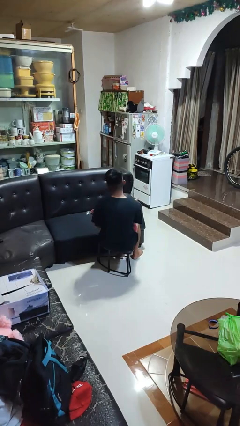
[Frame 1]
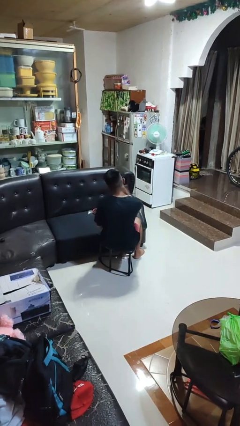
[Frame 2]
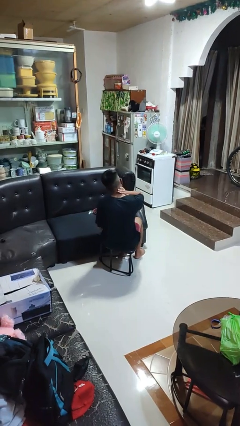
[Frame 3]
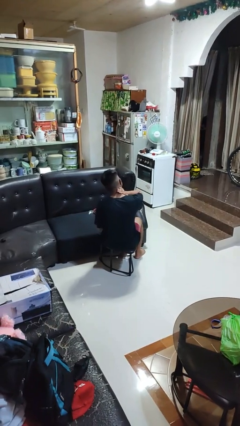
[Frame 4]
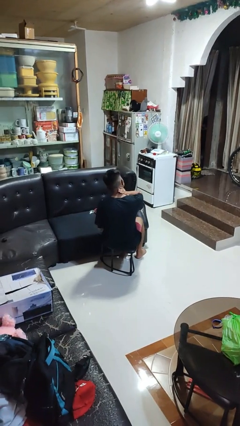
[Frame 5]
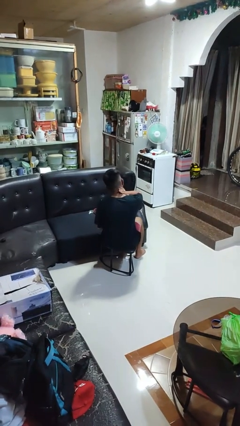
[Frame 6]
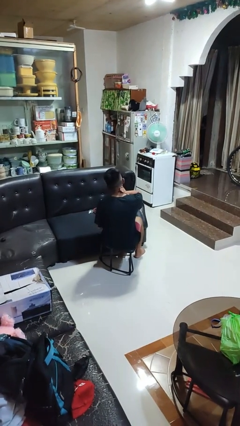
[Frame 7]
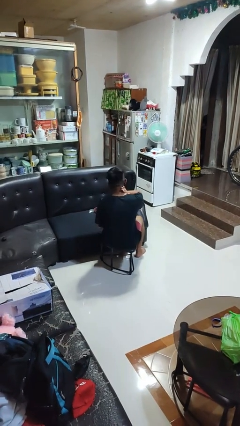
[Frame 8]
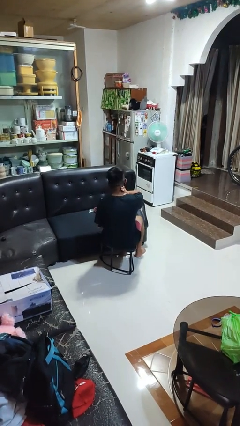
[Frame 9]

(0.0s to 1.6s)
person swats bug

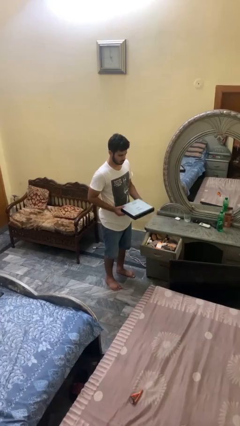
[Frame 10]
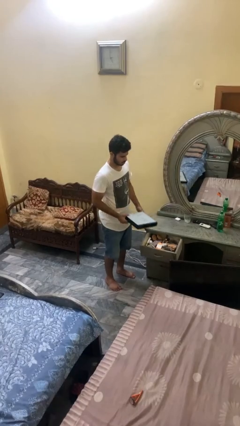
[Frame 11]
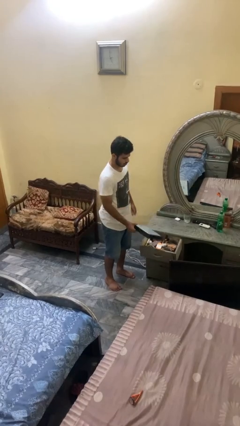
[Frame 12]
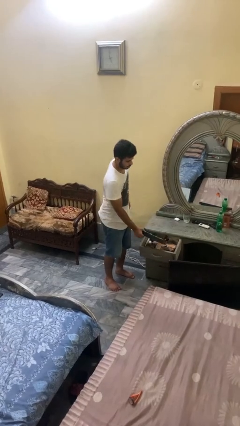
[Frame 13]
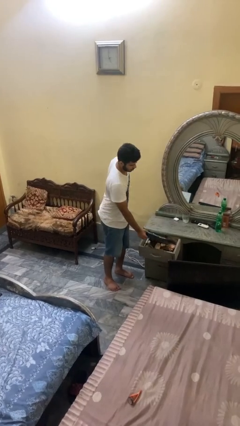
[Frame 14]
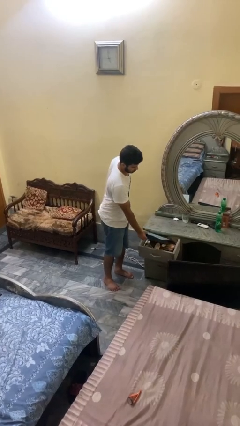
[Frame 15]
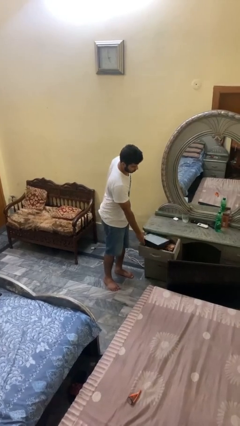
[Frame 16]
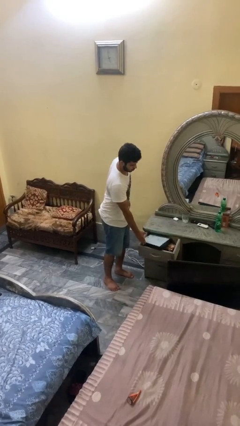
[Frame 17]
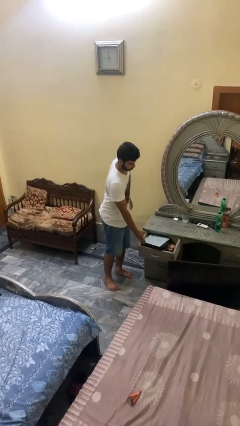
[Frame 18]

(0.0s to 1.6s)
person puts down object into cabinet

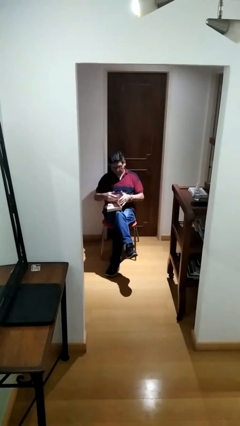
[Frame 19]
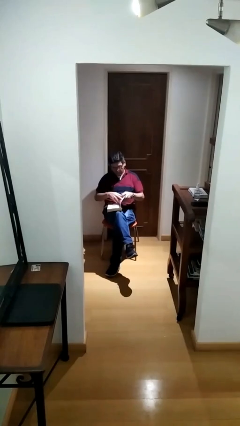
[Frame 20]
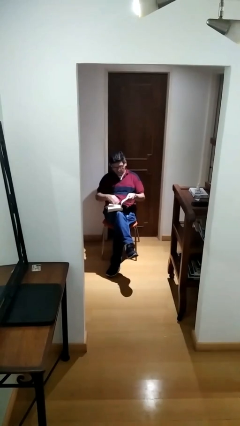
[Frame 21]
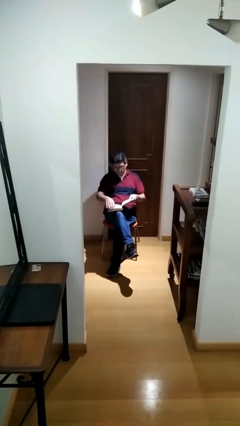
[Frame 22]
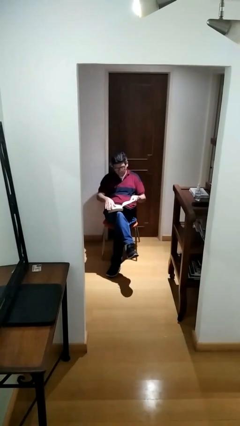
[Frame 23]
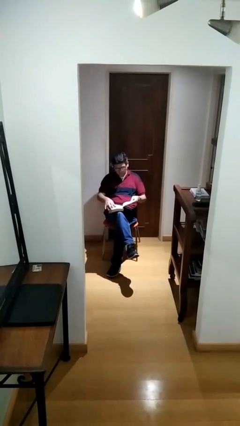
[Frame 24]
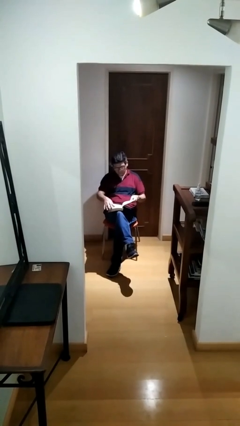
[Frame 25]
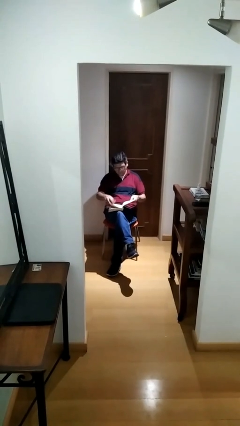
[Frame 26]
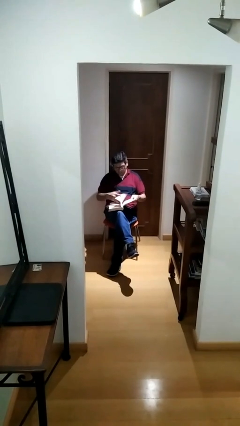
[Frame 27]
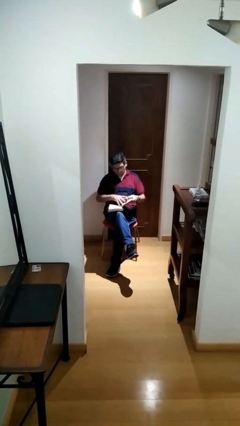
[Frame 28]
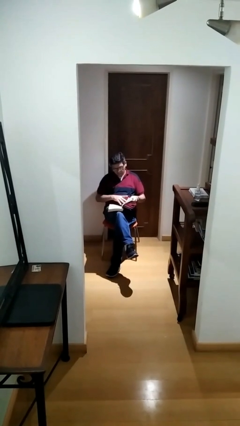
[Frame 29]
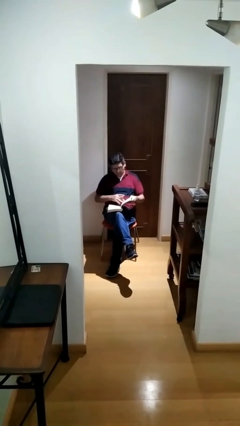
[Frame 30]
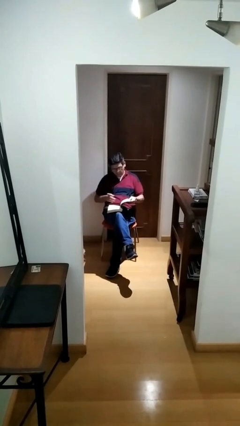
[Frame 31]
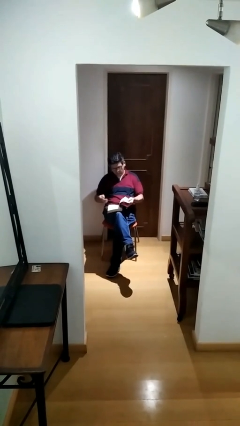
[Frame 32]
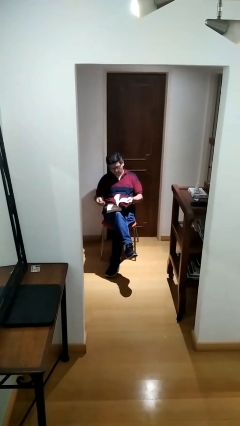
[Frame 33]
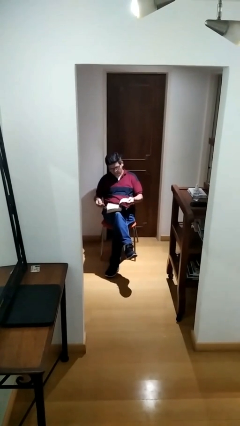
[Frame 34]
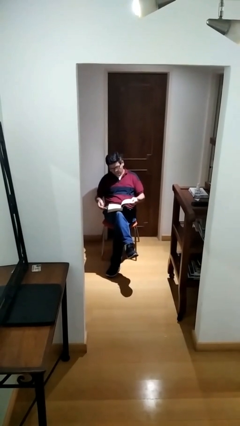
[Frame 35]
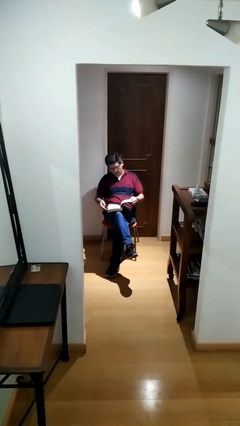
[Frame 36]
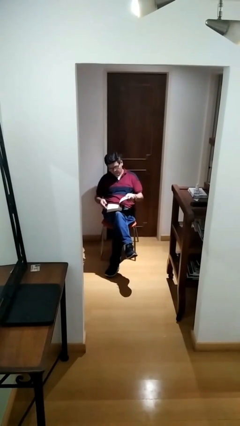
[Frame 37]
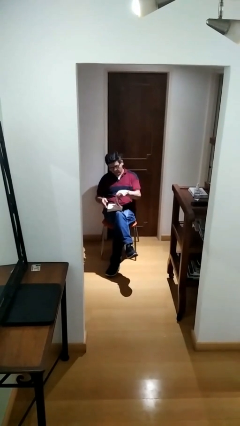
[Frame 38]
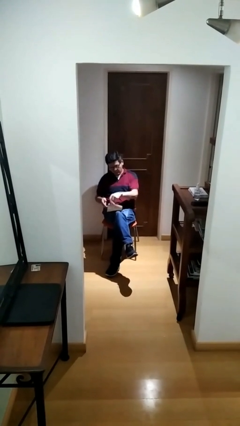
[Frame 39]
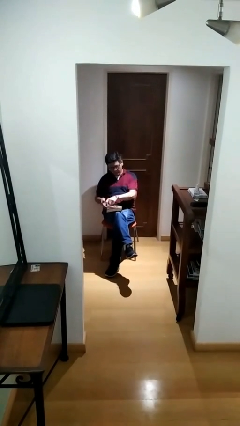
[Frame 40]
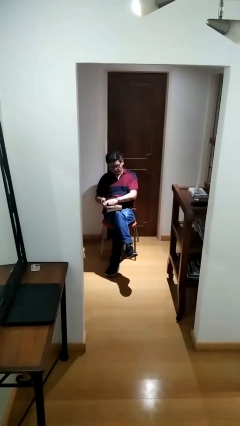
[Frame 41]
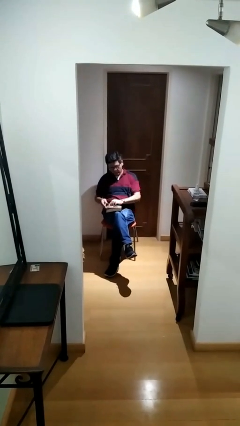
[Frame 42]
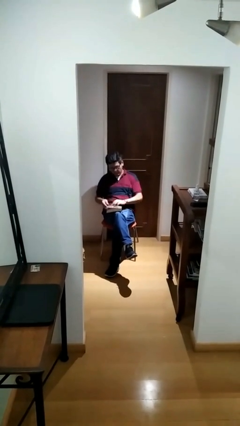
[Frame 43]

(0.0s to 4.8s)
person reads document

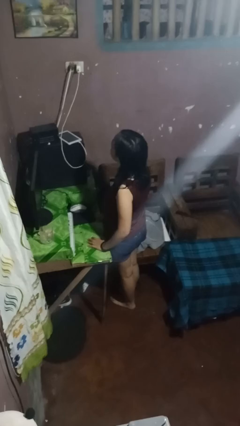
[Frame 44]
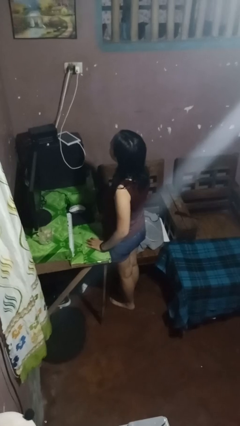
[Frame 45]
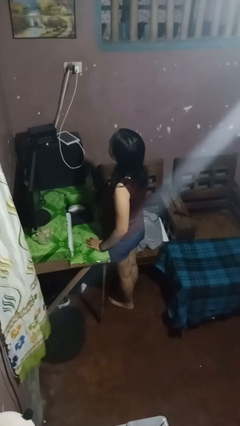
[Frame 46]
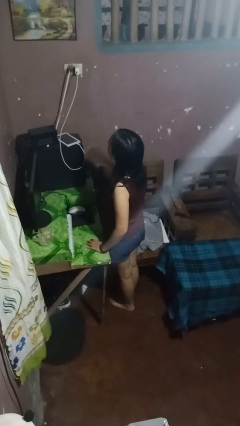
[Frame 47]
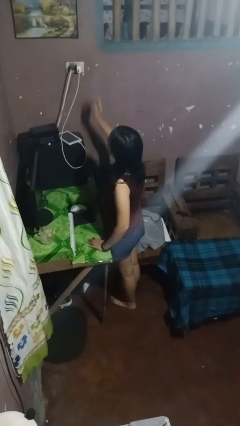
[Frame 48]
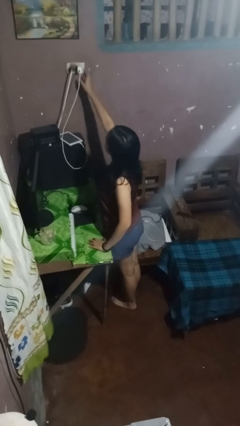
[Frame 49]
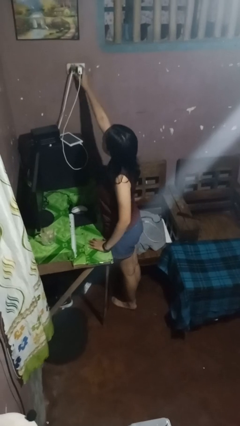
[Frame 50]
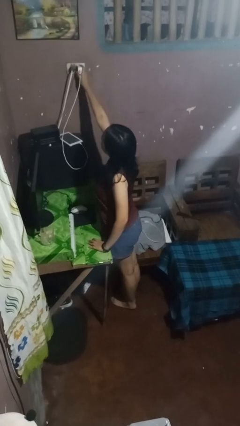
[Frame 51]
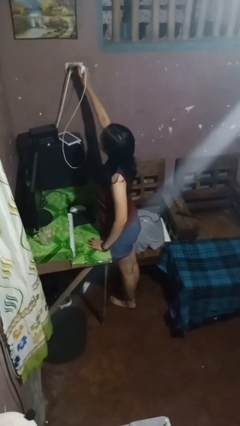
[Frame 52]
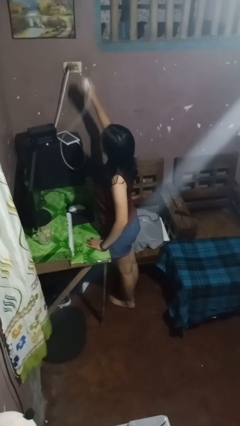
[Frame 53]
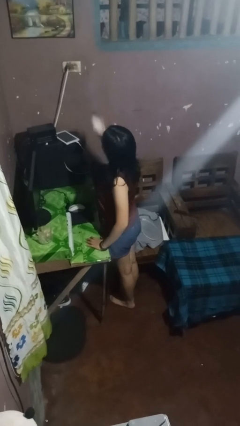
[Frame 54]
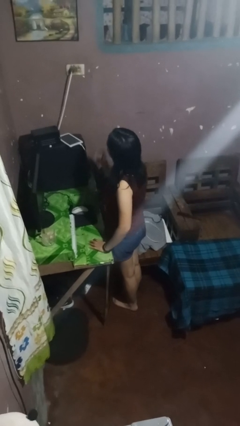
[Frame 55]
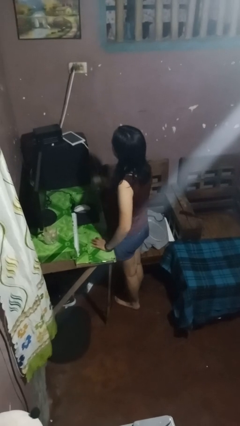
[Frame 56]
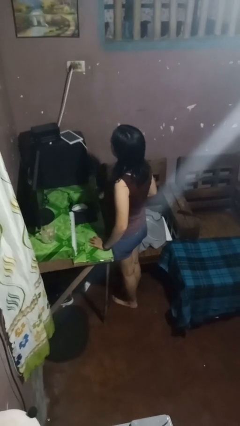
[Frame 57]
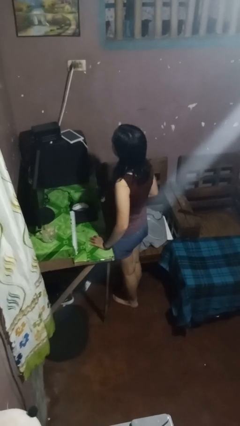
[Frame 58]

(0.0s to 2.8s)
person unplugs from electrical socket

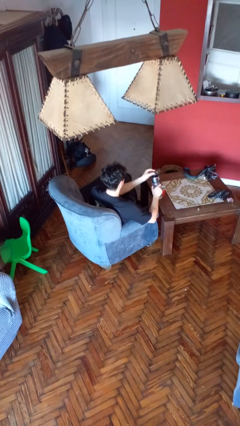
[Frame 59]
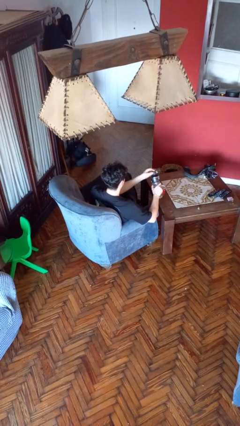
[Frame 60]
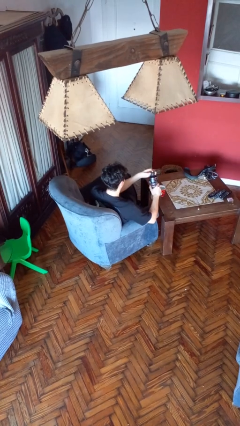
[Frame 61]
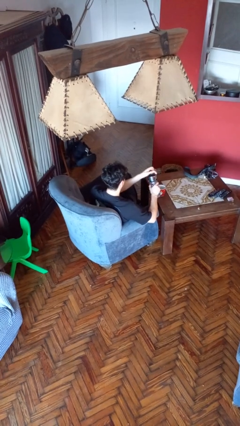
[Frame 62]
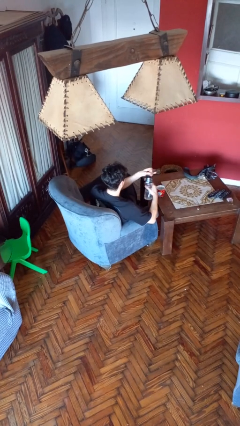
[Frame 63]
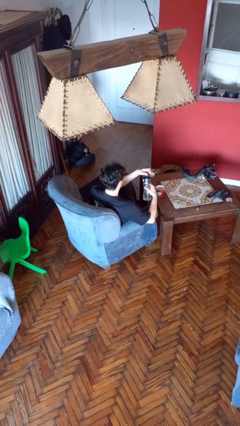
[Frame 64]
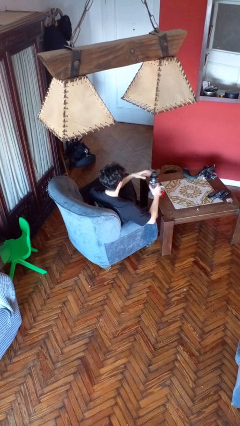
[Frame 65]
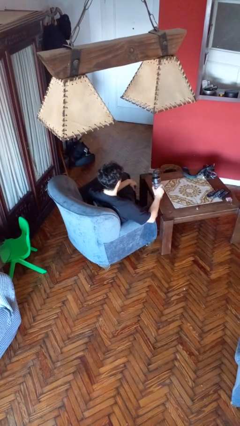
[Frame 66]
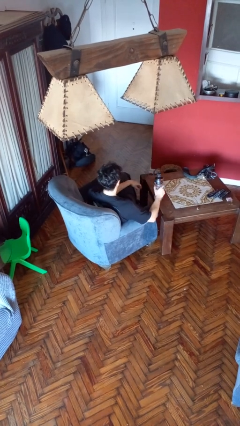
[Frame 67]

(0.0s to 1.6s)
person screws lid to bottle

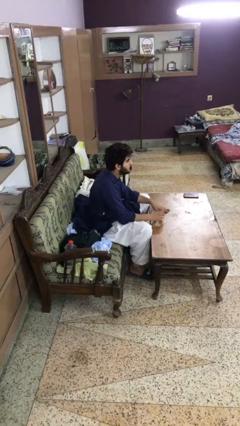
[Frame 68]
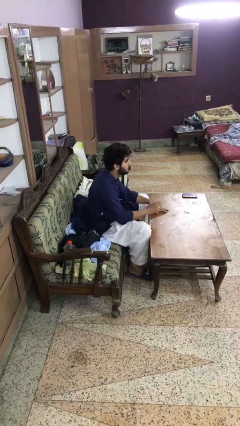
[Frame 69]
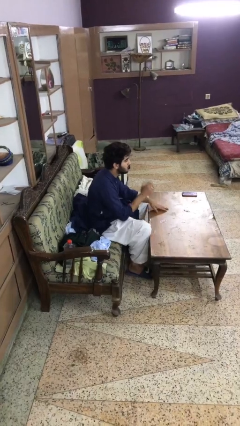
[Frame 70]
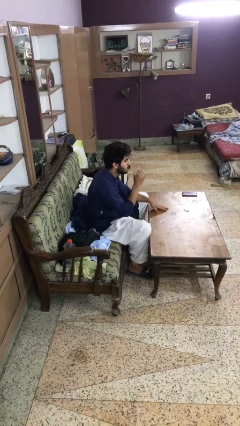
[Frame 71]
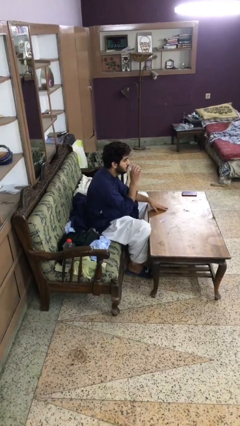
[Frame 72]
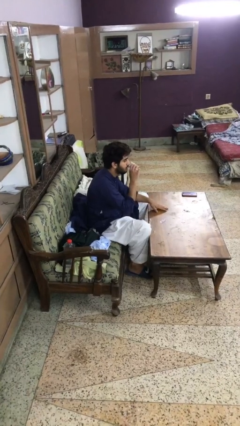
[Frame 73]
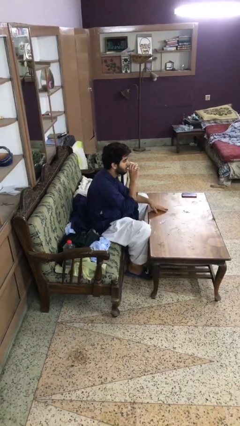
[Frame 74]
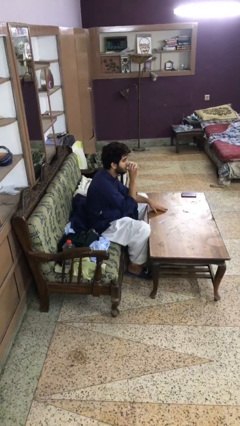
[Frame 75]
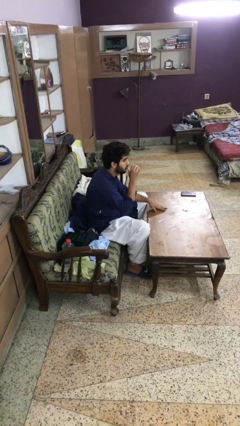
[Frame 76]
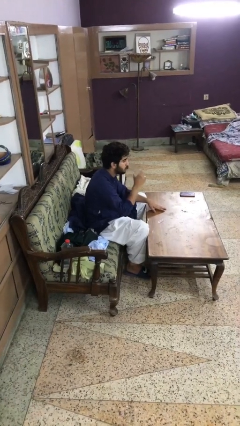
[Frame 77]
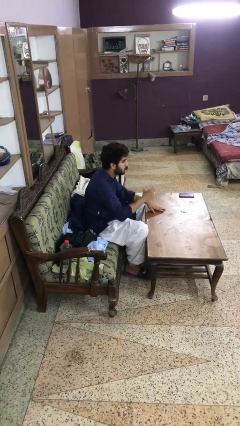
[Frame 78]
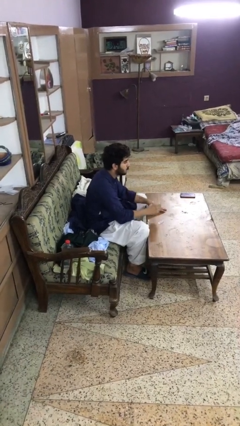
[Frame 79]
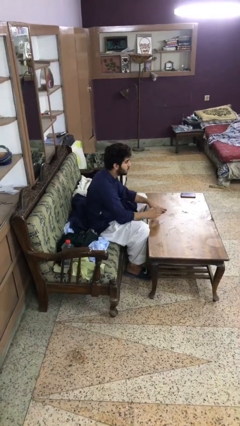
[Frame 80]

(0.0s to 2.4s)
person drinks from cup

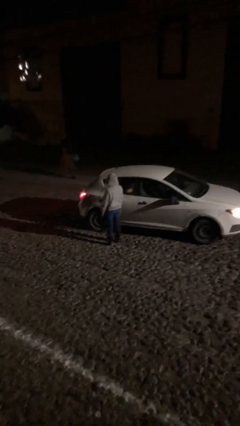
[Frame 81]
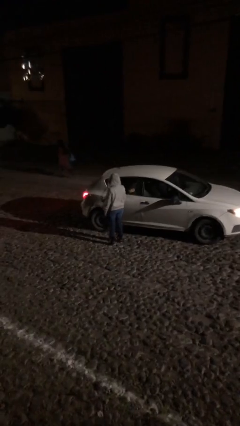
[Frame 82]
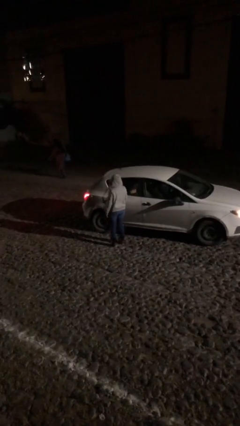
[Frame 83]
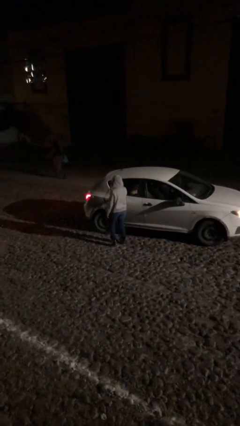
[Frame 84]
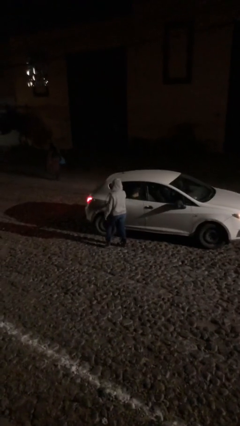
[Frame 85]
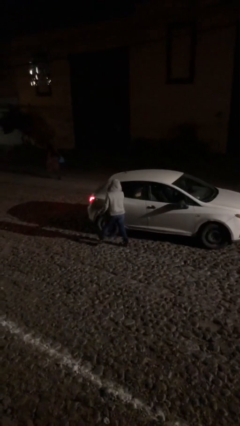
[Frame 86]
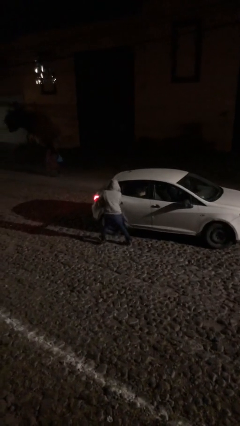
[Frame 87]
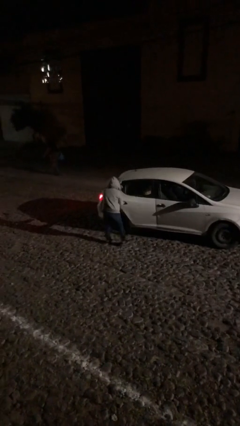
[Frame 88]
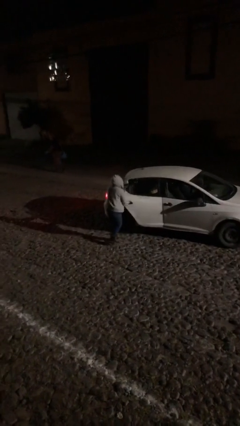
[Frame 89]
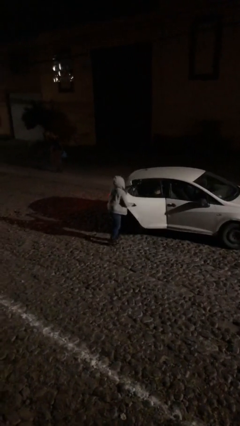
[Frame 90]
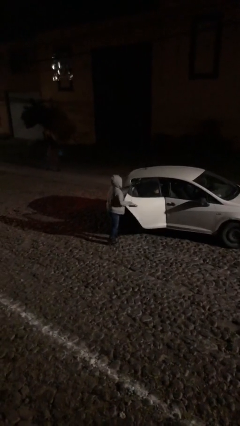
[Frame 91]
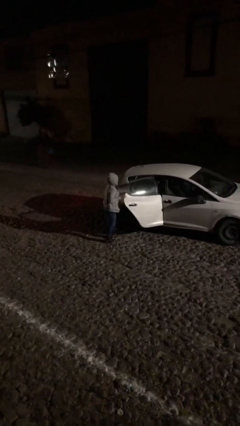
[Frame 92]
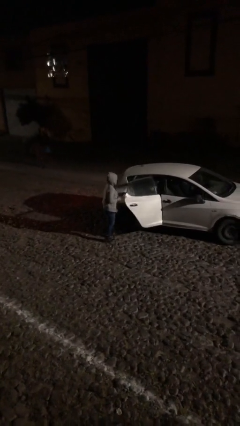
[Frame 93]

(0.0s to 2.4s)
person opens car door
